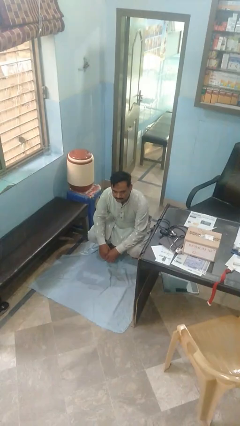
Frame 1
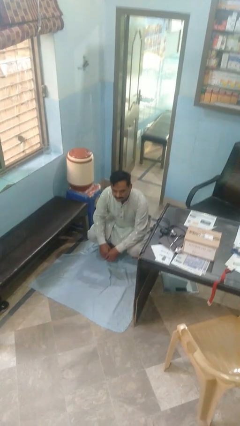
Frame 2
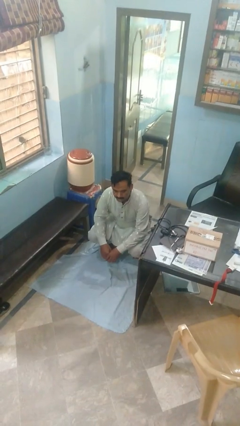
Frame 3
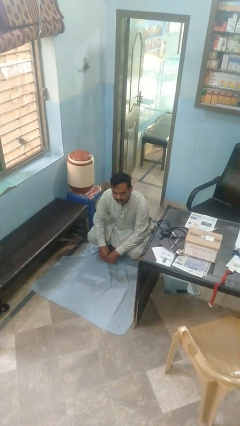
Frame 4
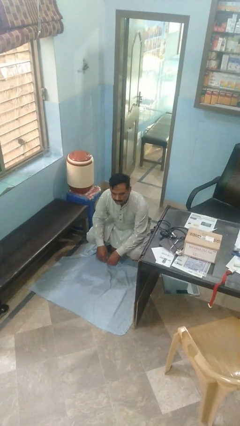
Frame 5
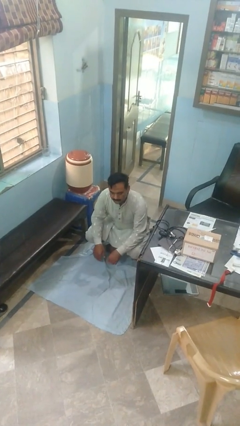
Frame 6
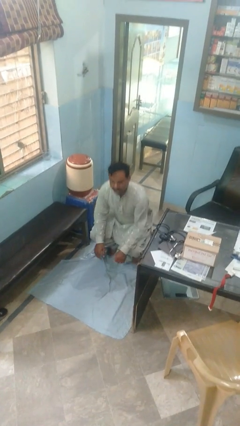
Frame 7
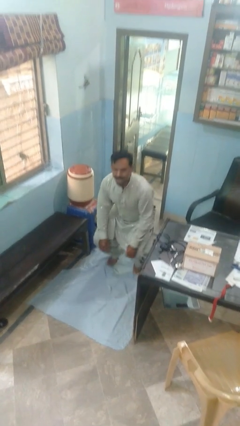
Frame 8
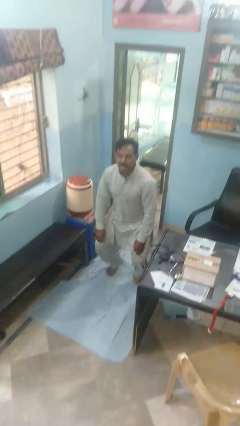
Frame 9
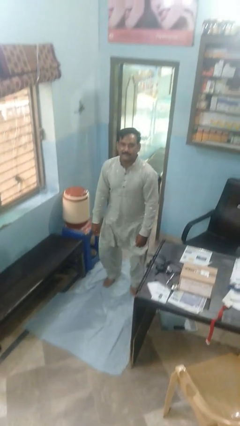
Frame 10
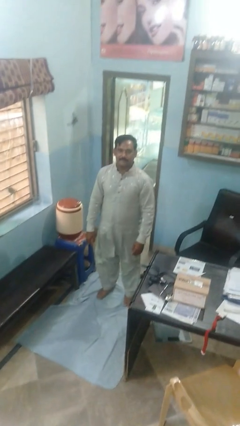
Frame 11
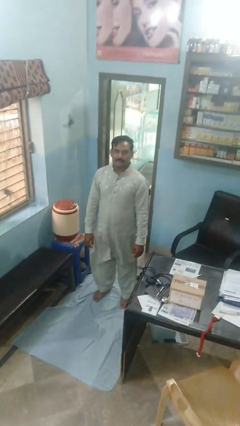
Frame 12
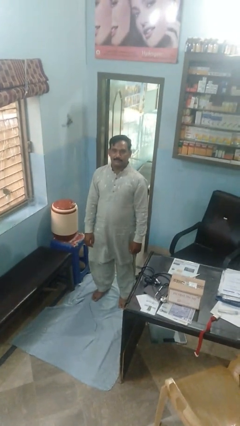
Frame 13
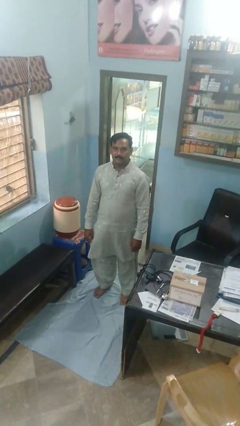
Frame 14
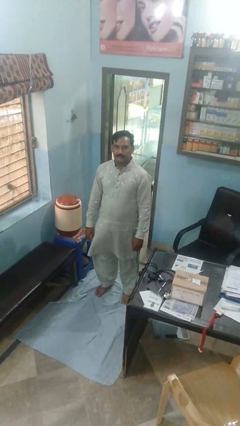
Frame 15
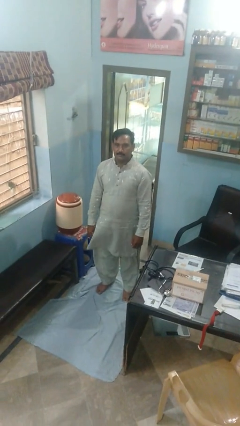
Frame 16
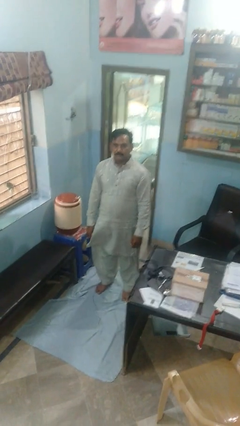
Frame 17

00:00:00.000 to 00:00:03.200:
person stands up

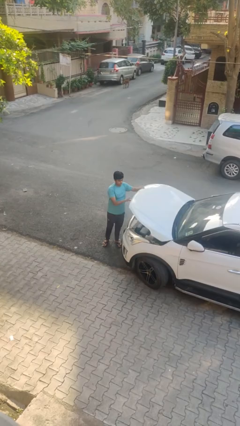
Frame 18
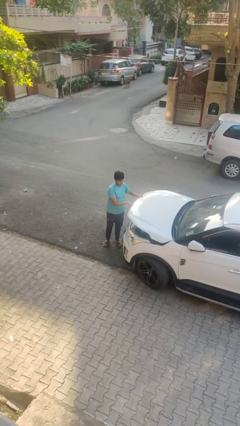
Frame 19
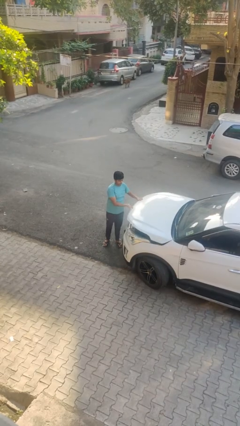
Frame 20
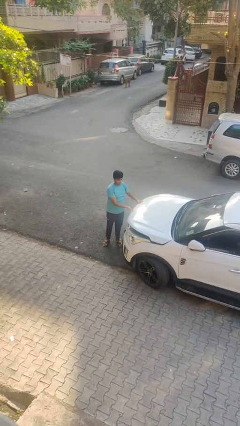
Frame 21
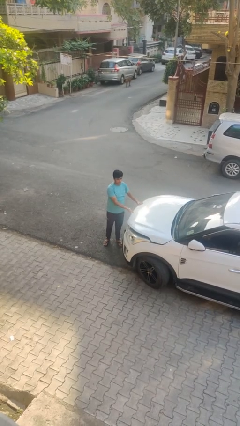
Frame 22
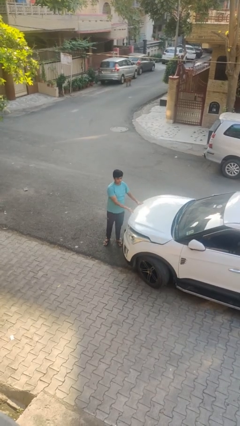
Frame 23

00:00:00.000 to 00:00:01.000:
person closes car hood

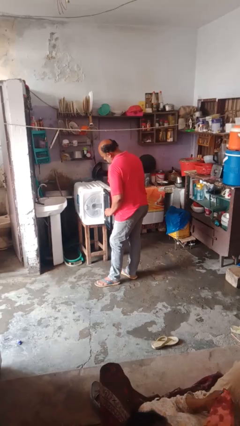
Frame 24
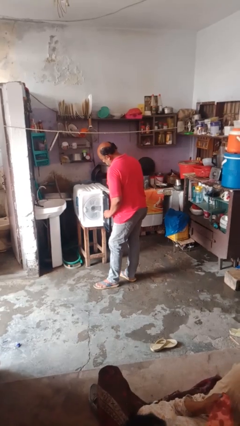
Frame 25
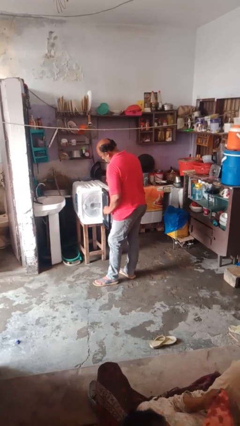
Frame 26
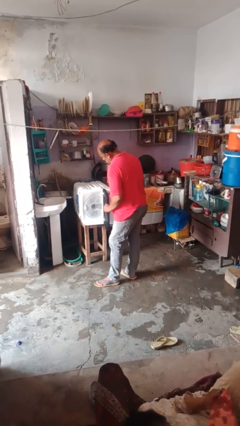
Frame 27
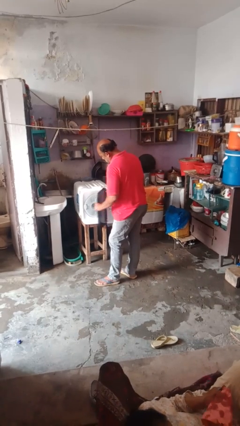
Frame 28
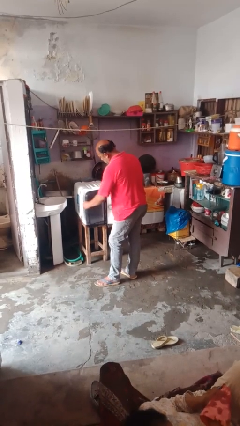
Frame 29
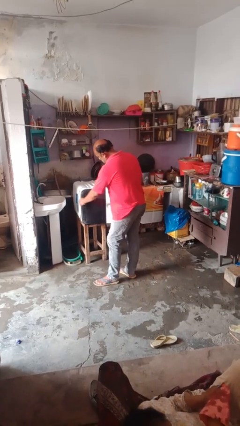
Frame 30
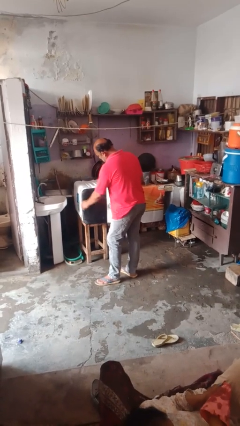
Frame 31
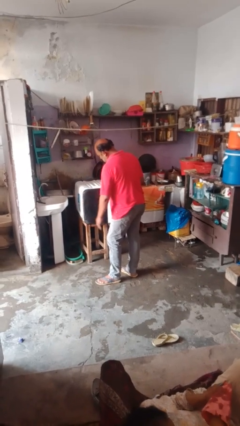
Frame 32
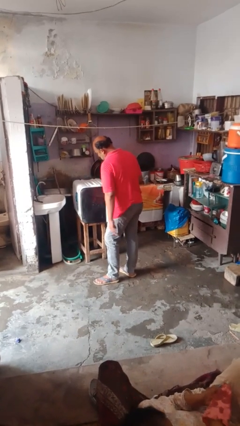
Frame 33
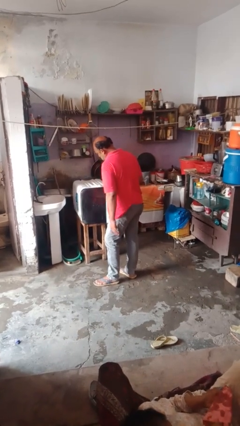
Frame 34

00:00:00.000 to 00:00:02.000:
person closes dishwasher

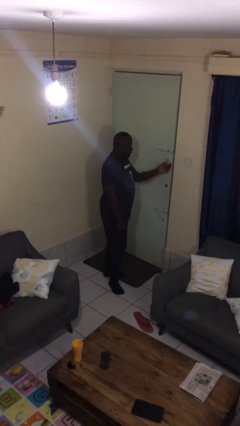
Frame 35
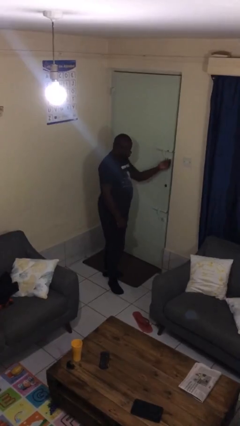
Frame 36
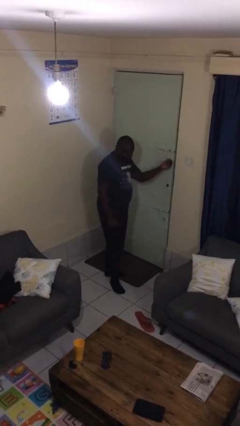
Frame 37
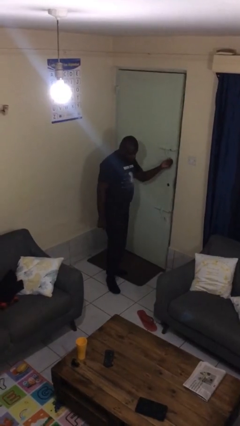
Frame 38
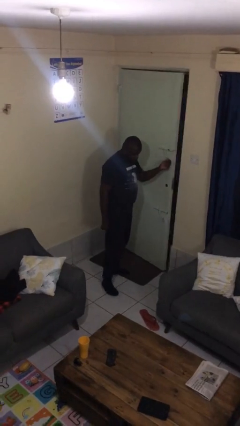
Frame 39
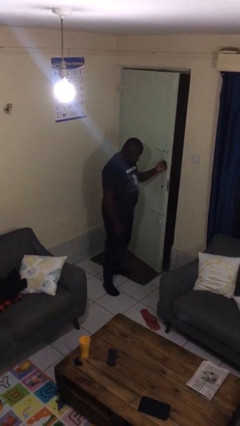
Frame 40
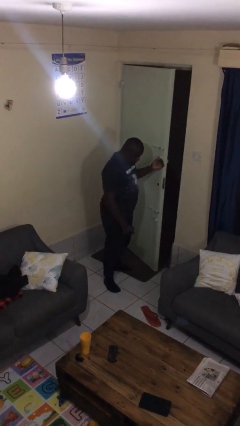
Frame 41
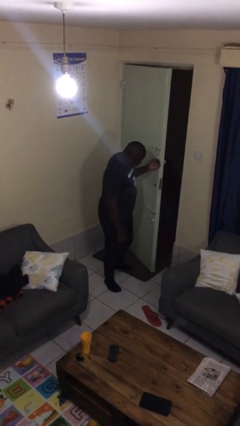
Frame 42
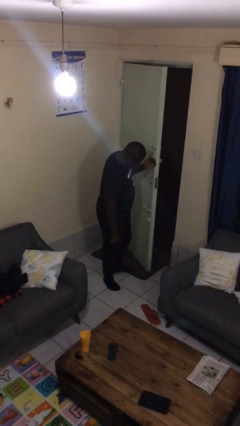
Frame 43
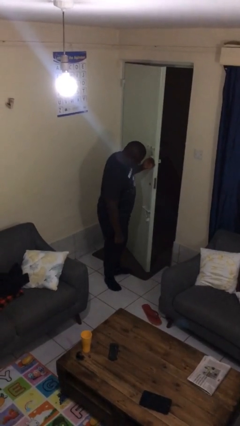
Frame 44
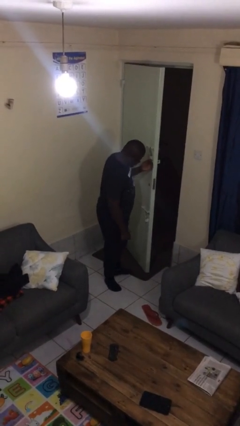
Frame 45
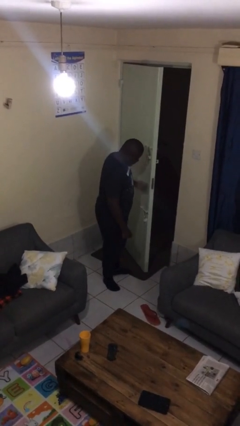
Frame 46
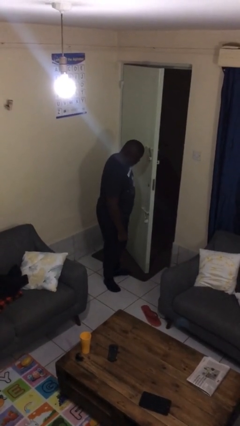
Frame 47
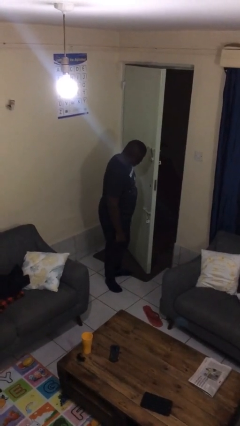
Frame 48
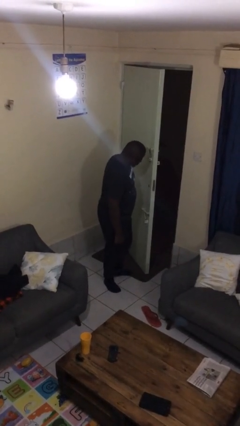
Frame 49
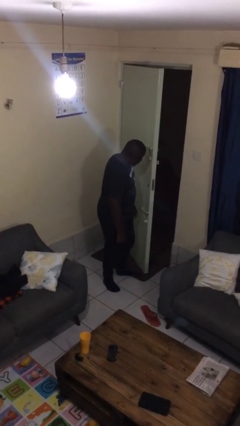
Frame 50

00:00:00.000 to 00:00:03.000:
person opens facility door

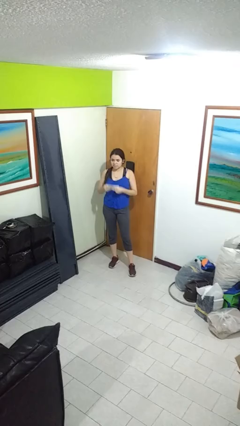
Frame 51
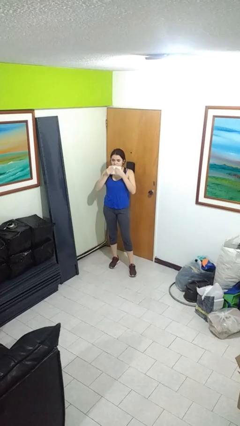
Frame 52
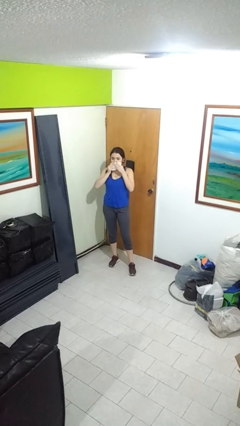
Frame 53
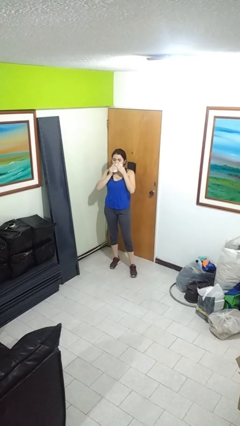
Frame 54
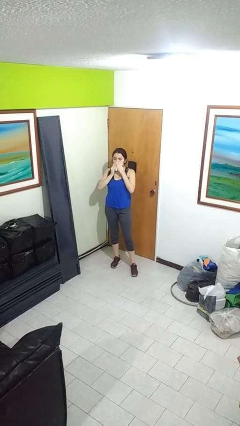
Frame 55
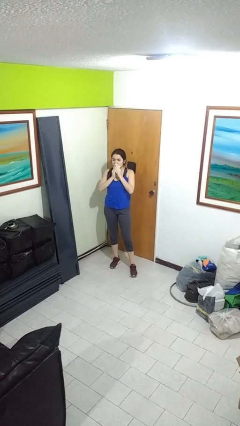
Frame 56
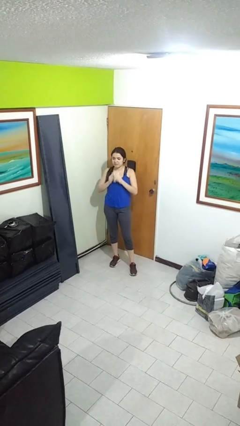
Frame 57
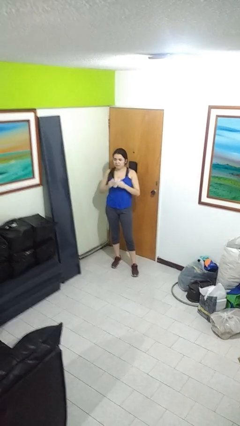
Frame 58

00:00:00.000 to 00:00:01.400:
person wipes mouth with napkin

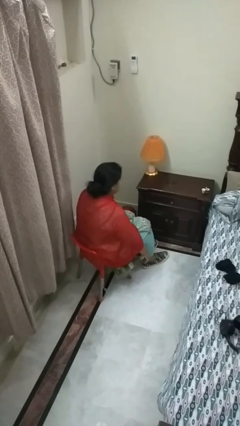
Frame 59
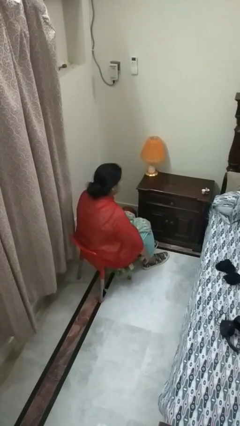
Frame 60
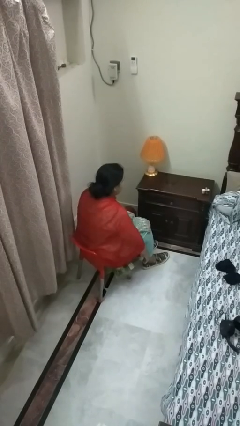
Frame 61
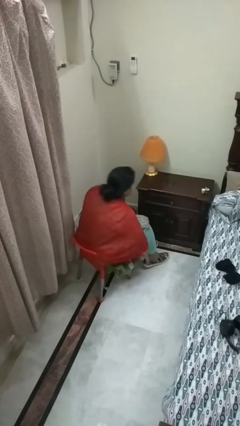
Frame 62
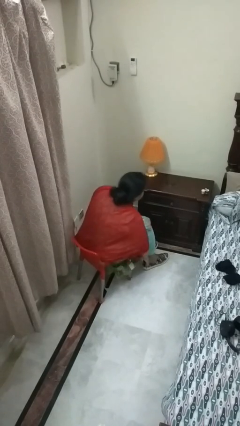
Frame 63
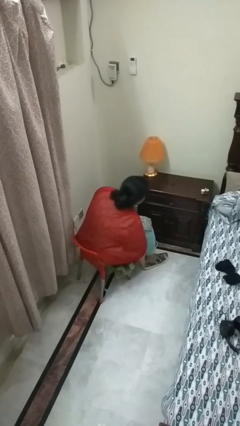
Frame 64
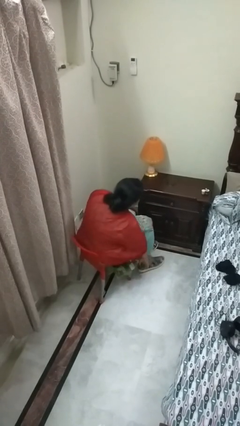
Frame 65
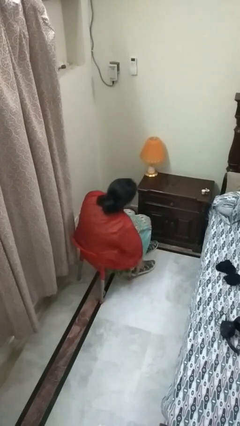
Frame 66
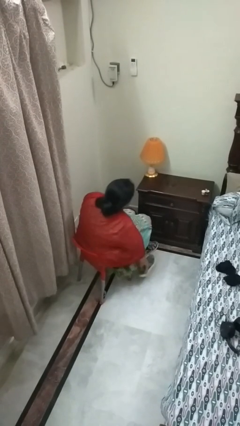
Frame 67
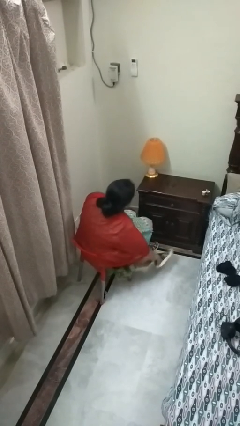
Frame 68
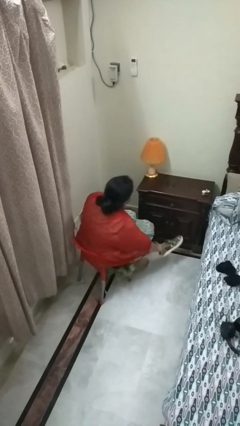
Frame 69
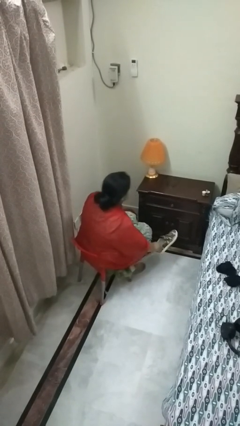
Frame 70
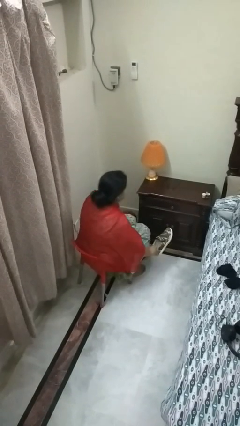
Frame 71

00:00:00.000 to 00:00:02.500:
person takes off shoes

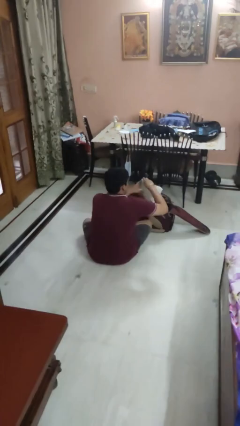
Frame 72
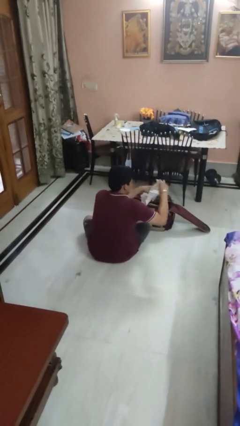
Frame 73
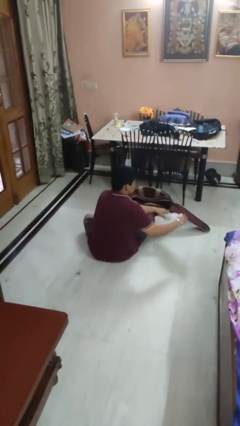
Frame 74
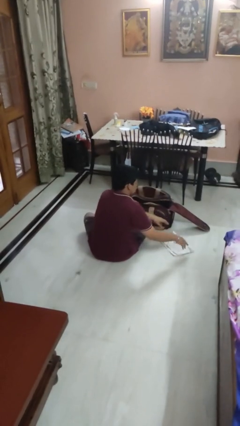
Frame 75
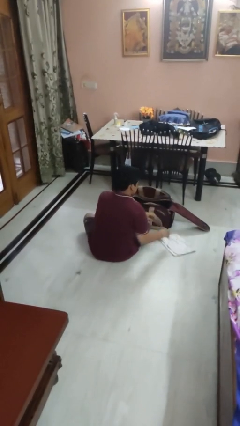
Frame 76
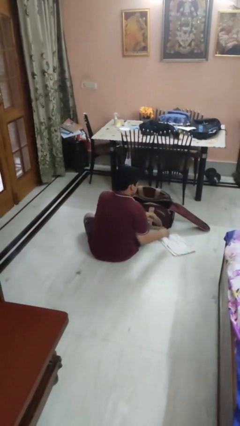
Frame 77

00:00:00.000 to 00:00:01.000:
person unloads clothes from suitcase

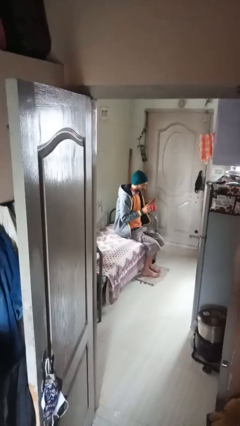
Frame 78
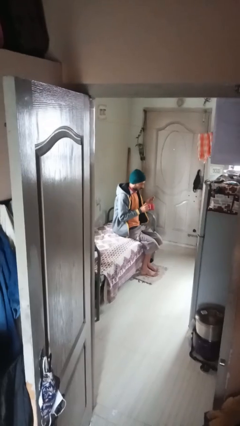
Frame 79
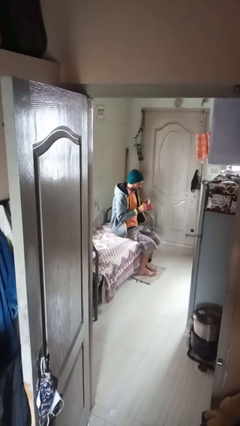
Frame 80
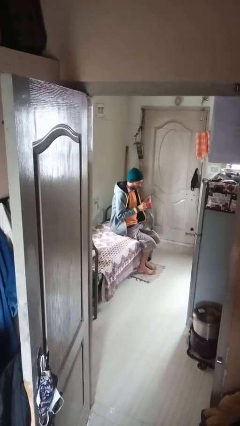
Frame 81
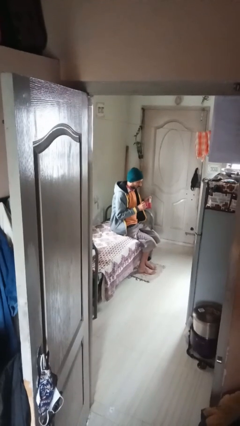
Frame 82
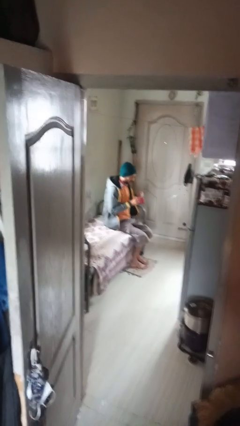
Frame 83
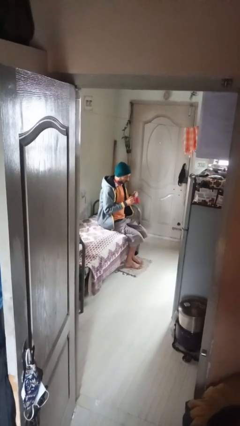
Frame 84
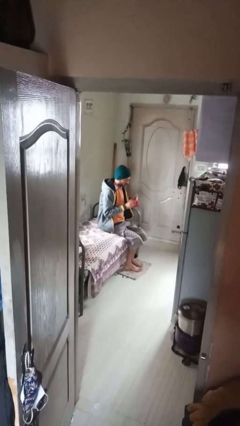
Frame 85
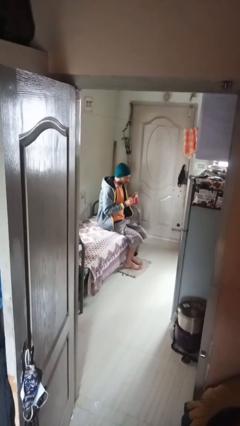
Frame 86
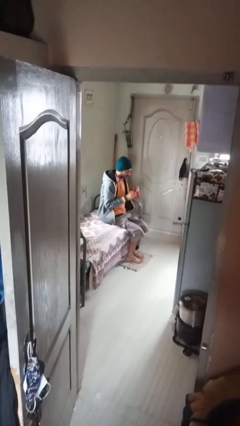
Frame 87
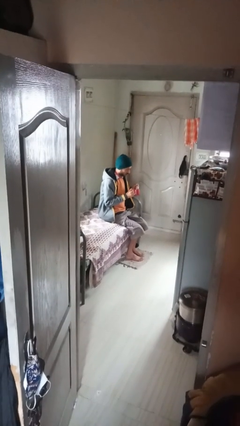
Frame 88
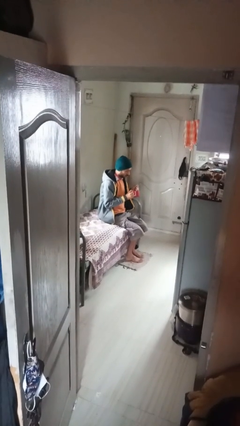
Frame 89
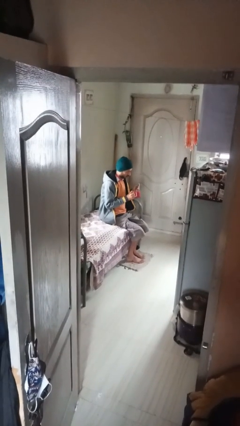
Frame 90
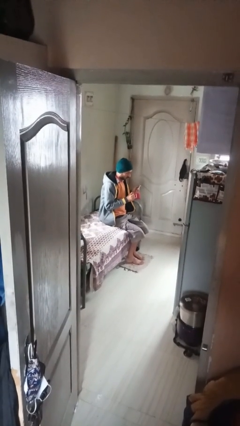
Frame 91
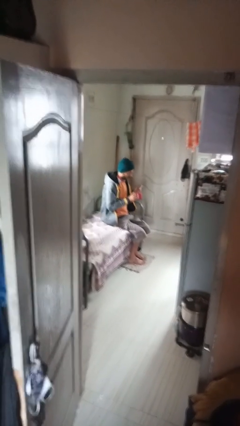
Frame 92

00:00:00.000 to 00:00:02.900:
person stirs mug

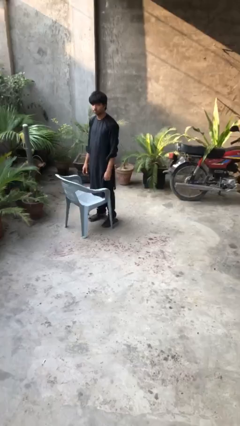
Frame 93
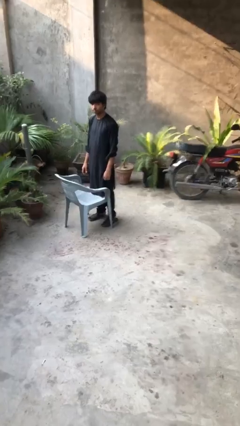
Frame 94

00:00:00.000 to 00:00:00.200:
person carries heavy object
